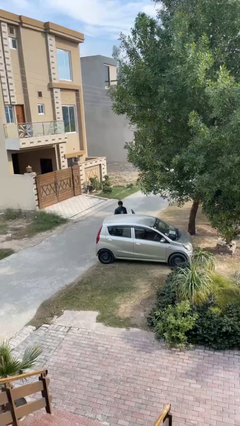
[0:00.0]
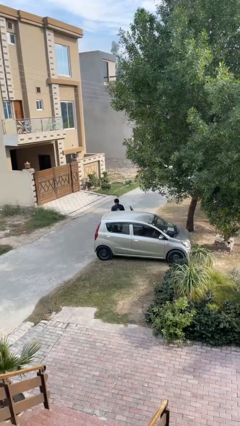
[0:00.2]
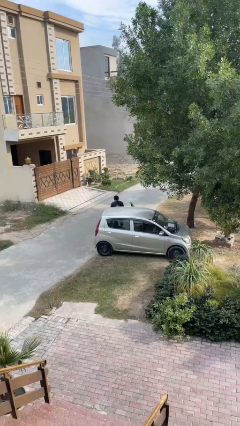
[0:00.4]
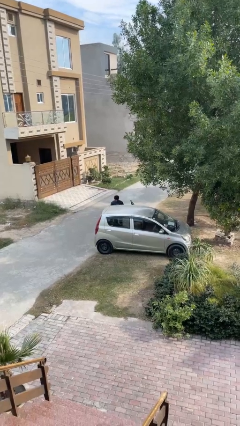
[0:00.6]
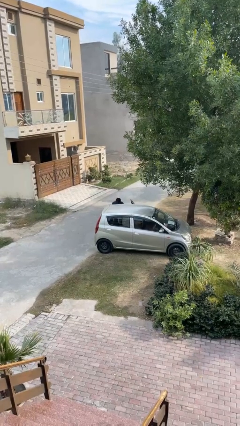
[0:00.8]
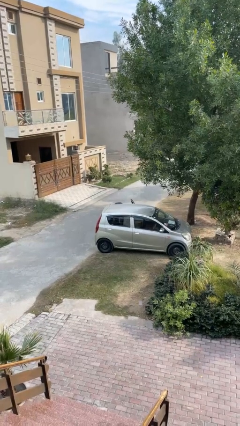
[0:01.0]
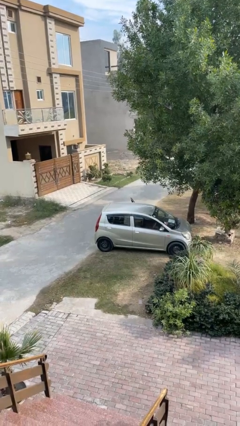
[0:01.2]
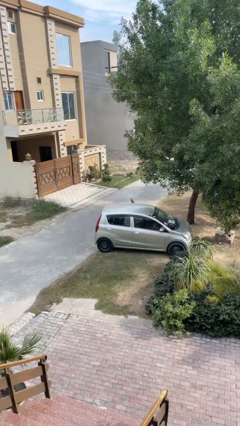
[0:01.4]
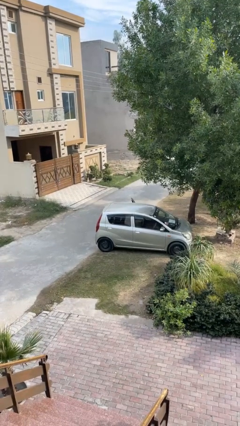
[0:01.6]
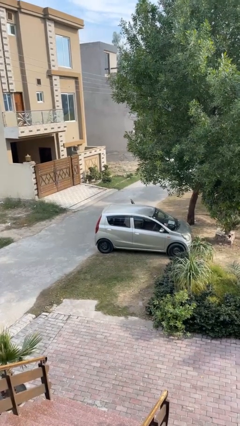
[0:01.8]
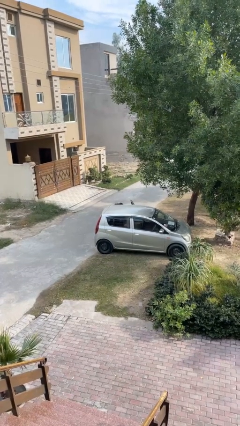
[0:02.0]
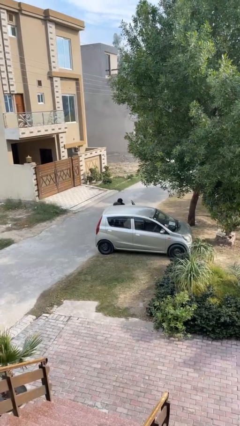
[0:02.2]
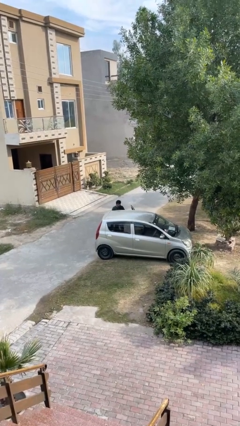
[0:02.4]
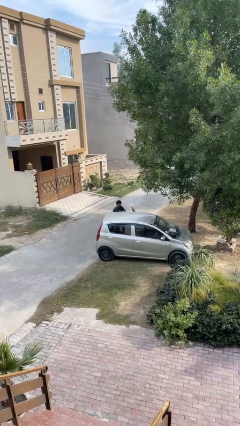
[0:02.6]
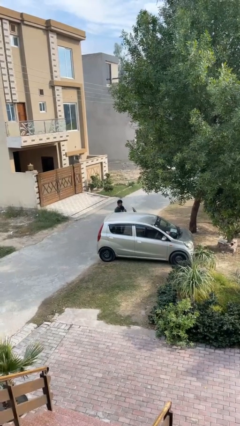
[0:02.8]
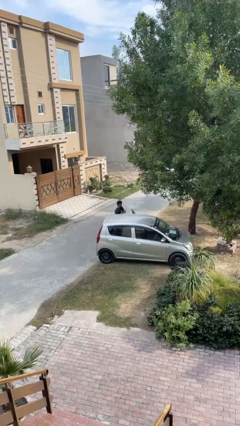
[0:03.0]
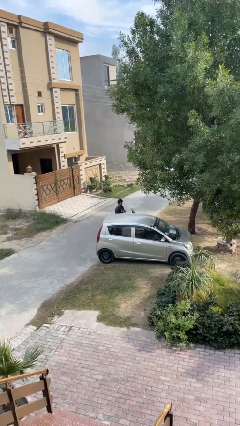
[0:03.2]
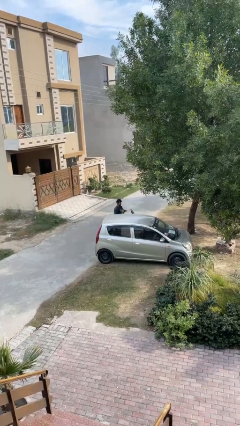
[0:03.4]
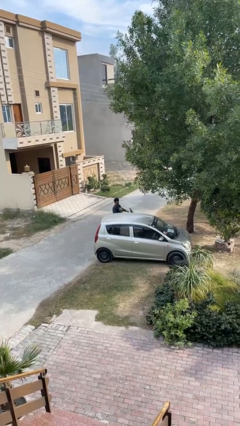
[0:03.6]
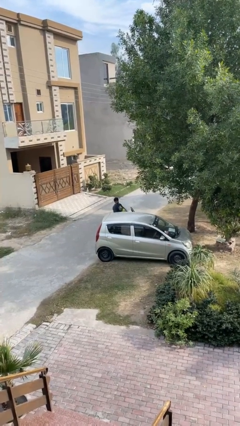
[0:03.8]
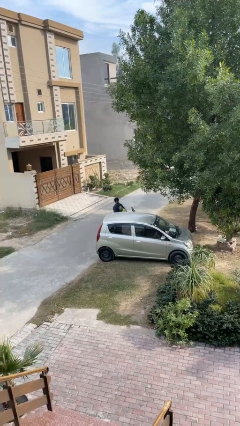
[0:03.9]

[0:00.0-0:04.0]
person unloads car

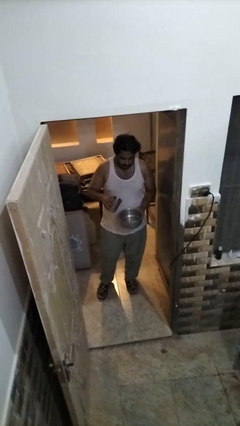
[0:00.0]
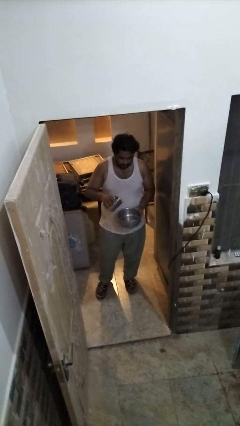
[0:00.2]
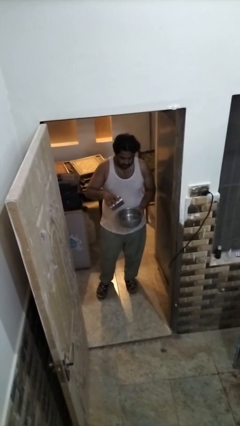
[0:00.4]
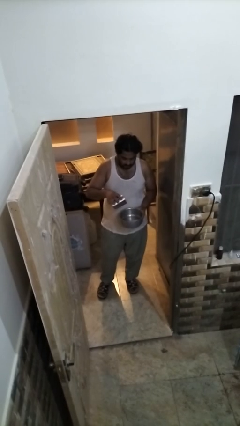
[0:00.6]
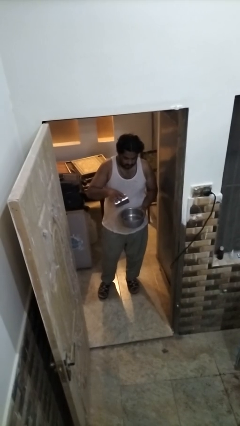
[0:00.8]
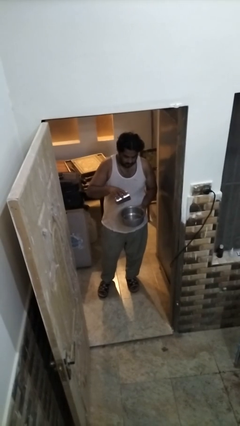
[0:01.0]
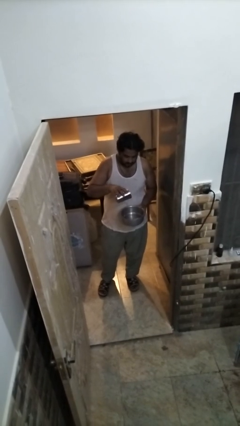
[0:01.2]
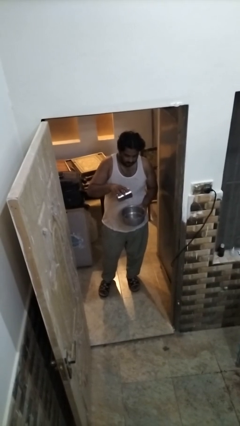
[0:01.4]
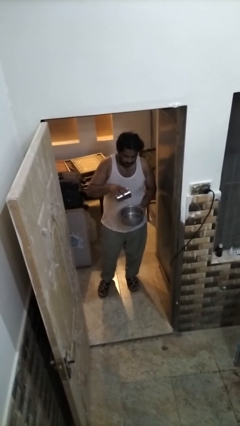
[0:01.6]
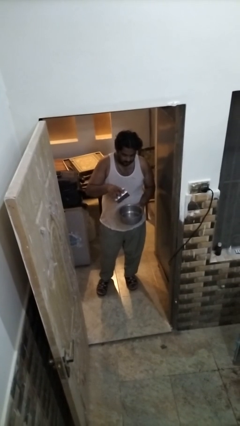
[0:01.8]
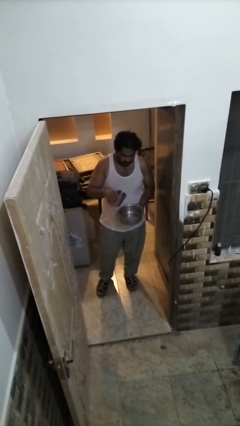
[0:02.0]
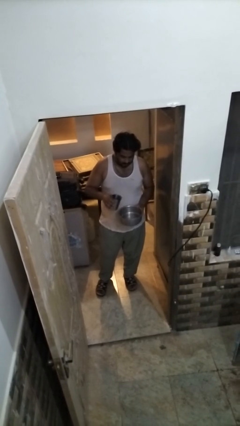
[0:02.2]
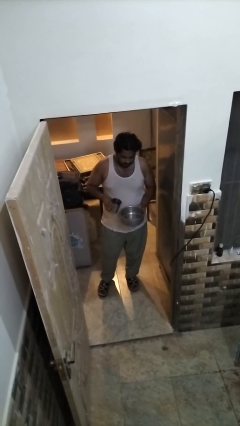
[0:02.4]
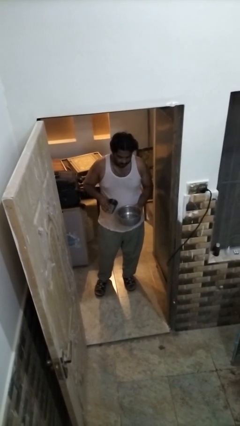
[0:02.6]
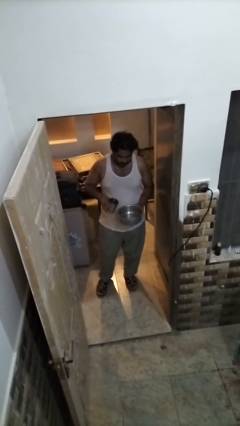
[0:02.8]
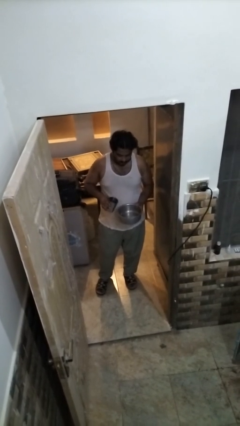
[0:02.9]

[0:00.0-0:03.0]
person pours into bowl

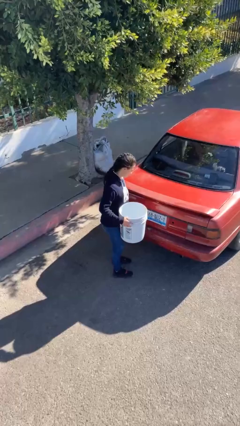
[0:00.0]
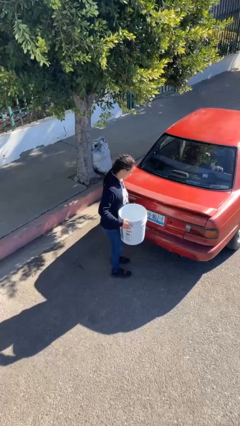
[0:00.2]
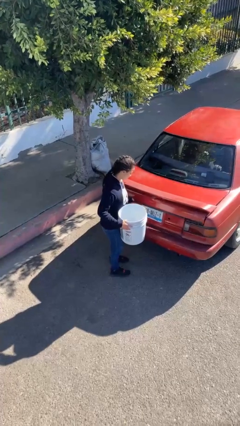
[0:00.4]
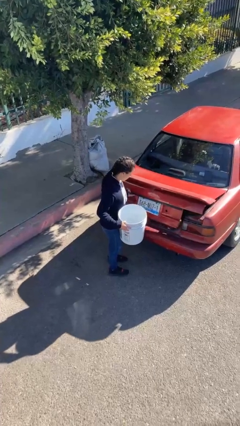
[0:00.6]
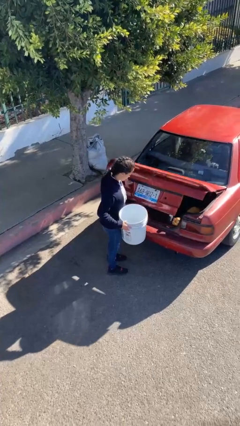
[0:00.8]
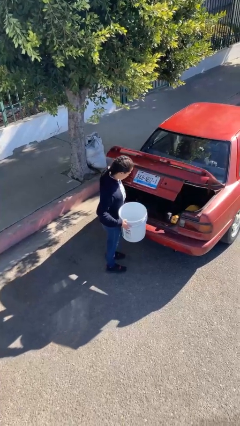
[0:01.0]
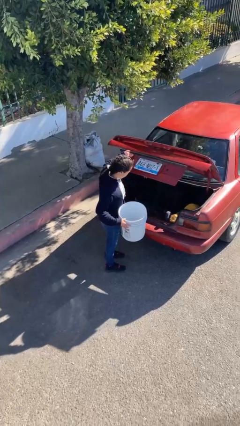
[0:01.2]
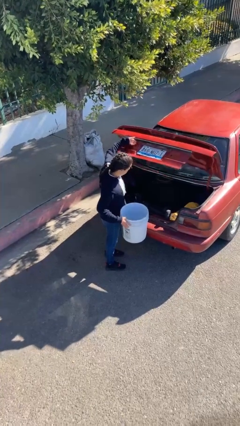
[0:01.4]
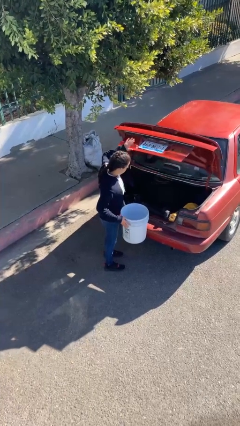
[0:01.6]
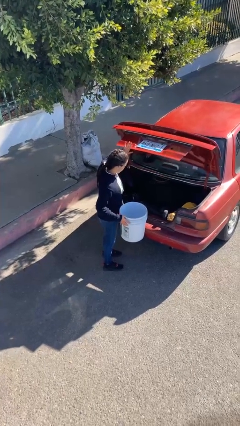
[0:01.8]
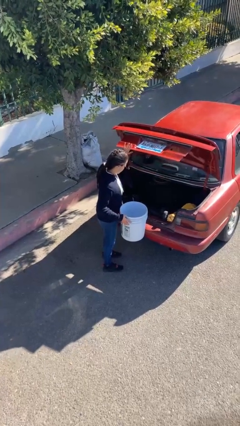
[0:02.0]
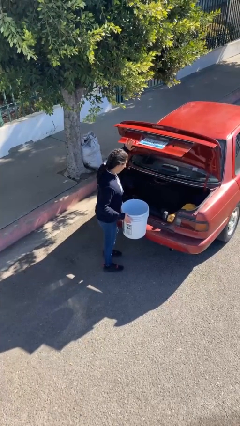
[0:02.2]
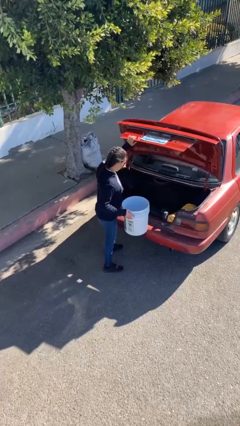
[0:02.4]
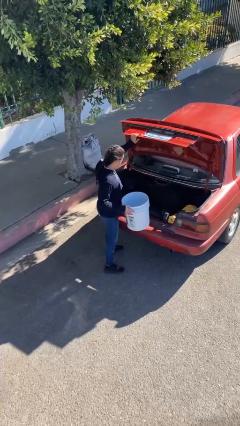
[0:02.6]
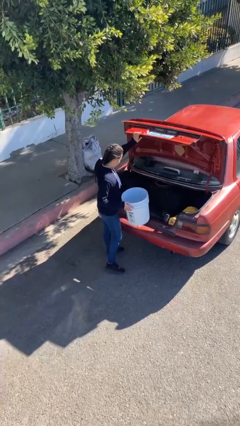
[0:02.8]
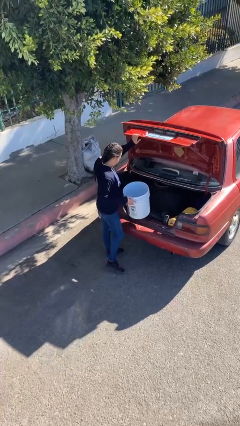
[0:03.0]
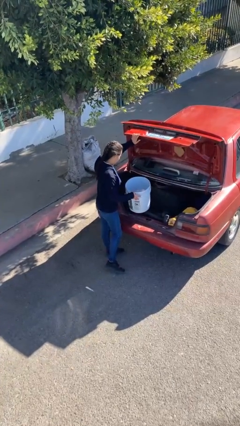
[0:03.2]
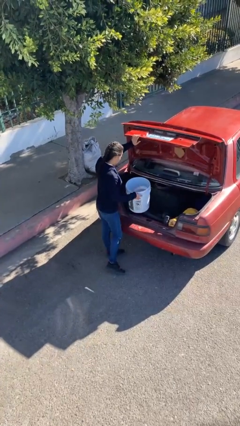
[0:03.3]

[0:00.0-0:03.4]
person opens car trunk

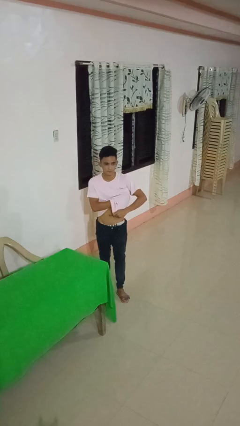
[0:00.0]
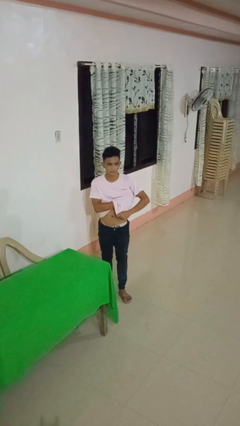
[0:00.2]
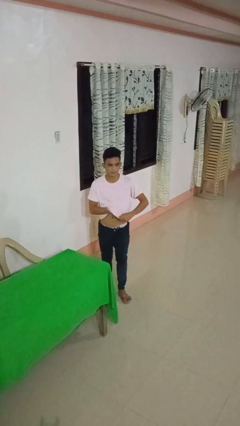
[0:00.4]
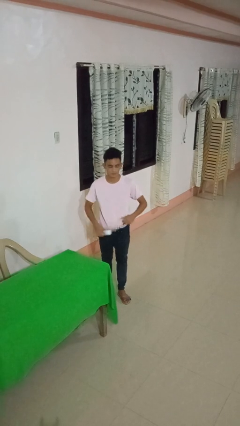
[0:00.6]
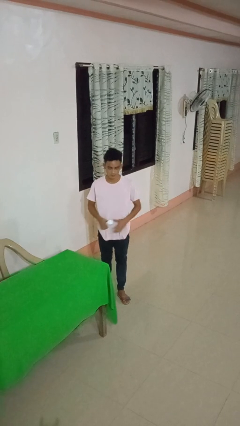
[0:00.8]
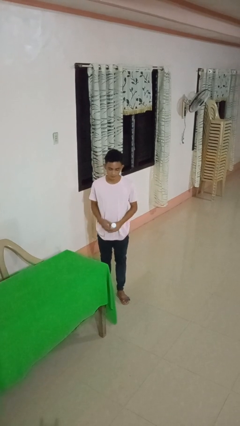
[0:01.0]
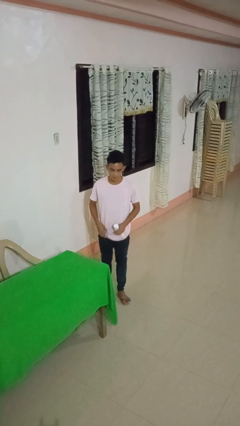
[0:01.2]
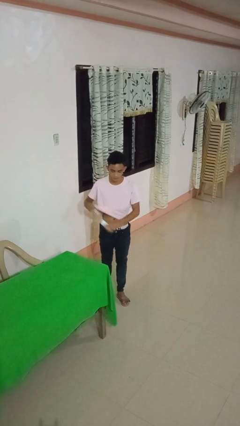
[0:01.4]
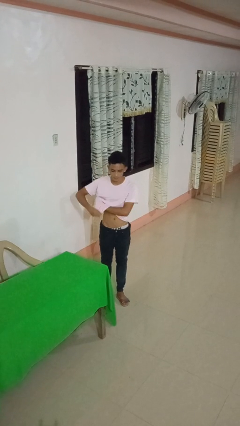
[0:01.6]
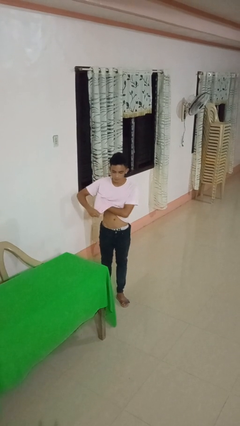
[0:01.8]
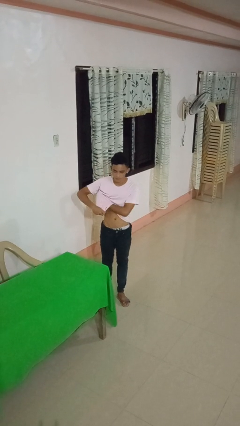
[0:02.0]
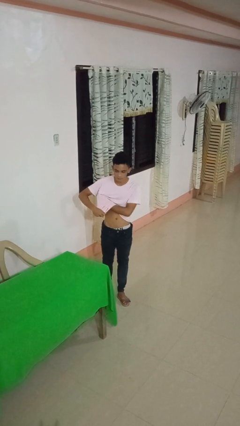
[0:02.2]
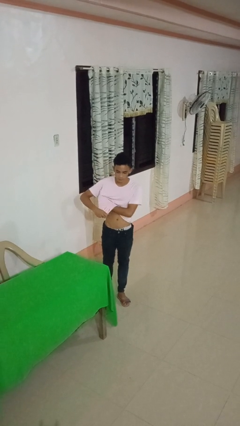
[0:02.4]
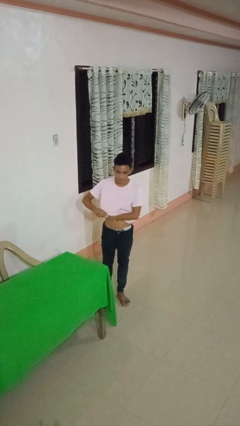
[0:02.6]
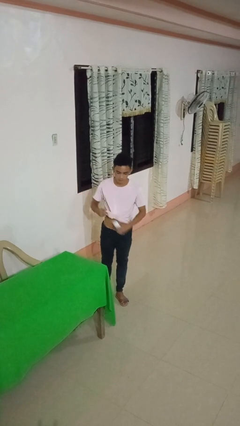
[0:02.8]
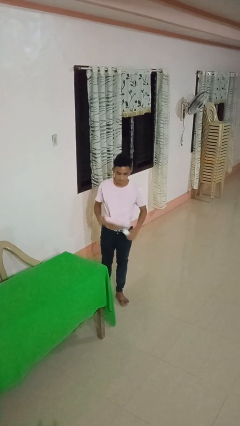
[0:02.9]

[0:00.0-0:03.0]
person applies deodorant

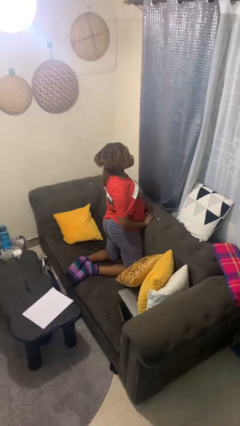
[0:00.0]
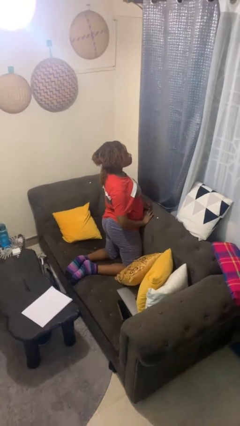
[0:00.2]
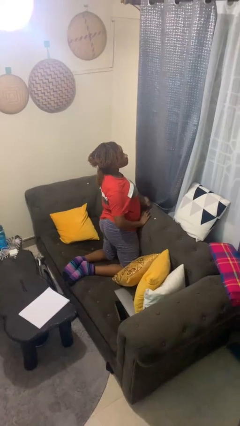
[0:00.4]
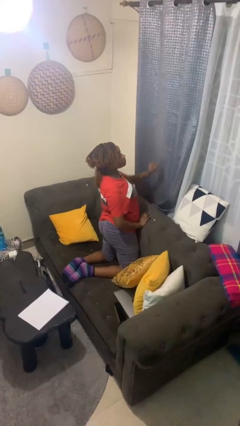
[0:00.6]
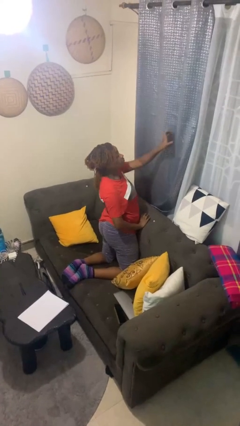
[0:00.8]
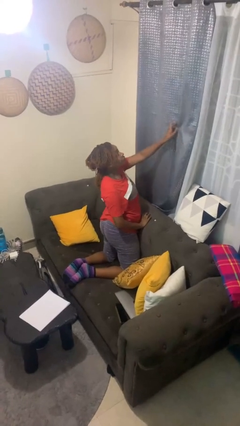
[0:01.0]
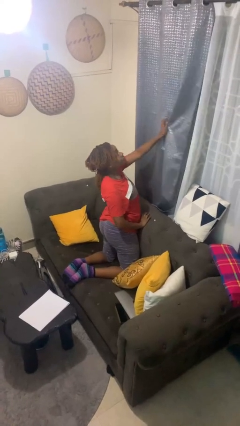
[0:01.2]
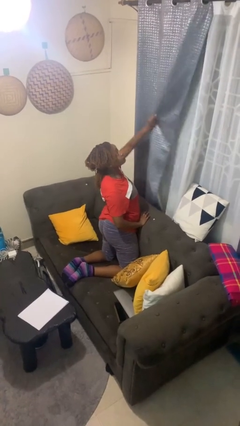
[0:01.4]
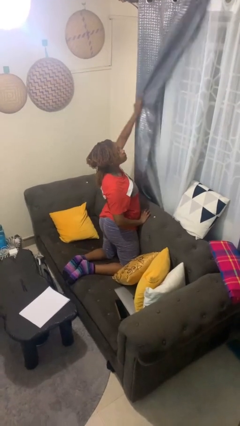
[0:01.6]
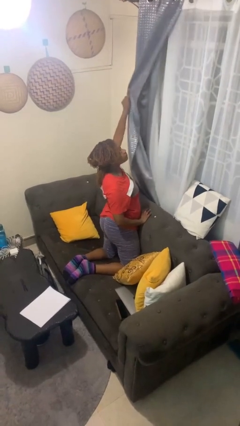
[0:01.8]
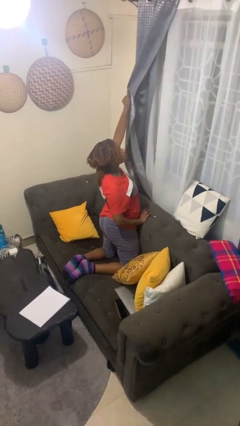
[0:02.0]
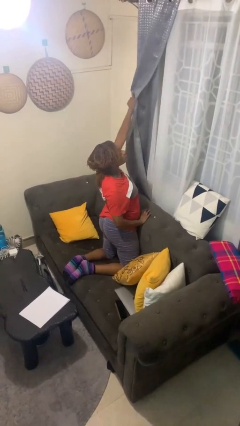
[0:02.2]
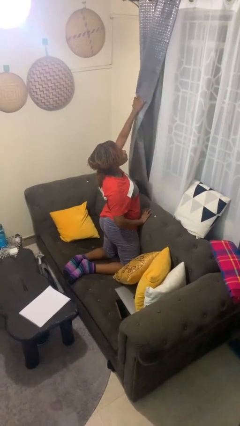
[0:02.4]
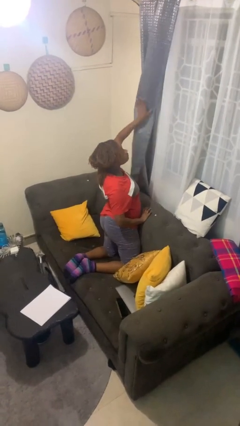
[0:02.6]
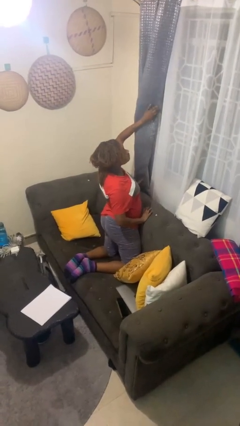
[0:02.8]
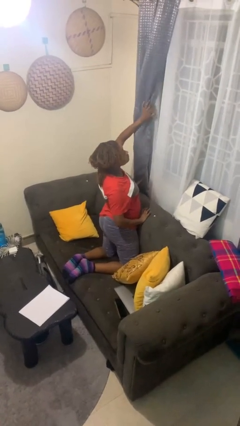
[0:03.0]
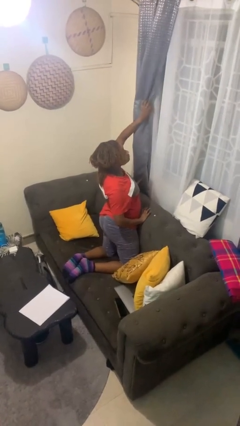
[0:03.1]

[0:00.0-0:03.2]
person opens curtains

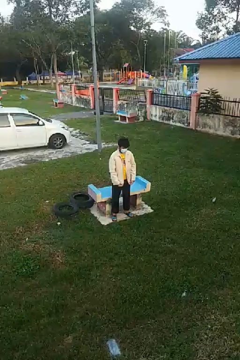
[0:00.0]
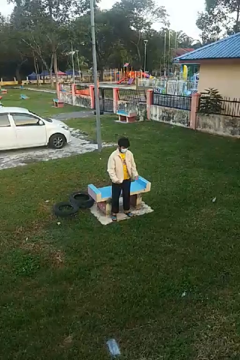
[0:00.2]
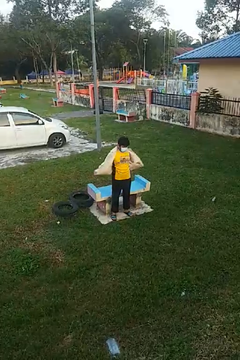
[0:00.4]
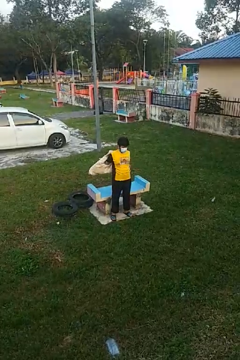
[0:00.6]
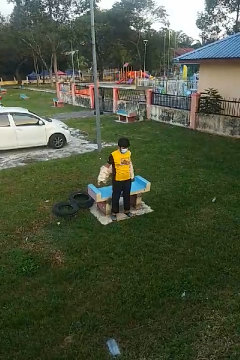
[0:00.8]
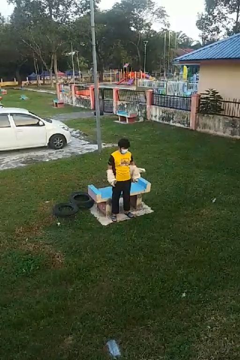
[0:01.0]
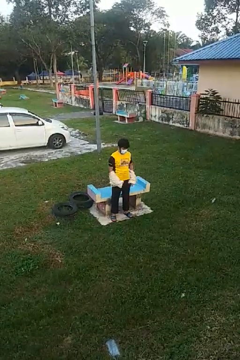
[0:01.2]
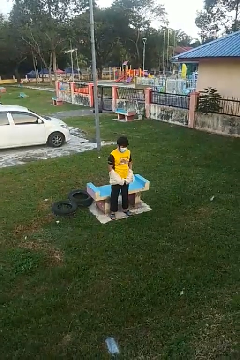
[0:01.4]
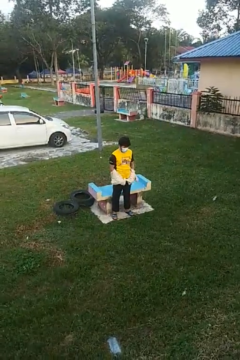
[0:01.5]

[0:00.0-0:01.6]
person takes off jacket
